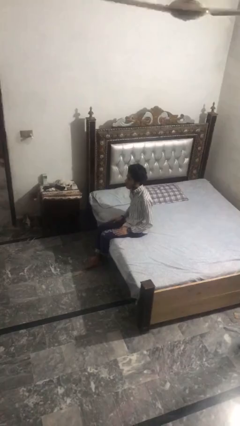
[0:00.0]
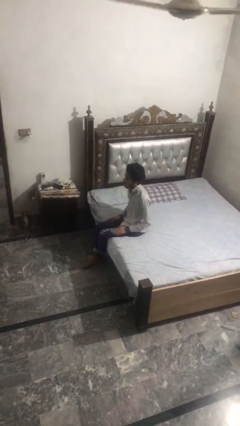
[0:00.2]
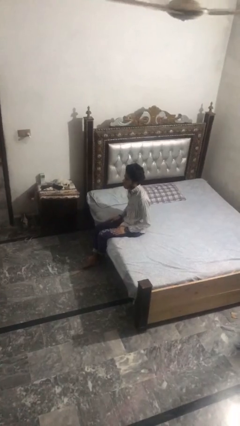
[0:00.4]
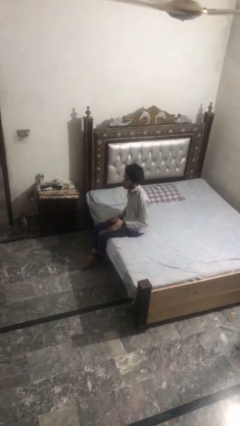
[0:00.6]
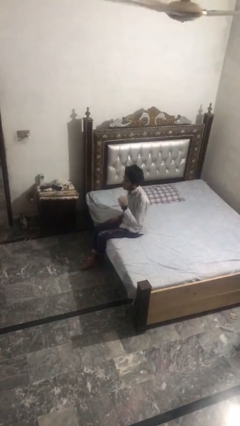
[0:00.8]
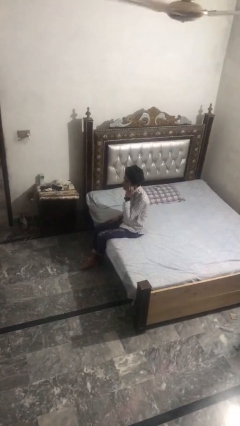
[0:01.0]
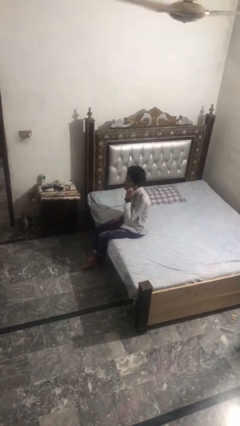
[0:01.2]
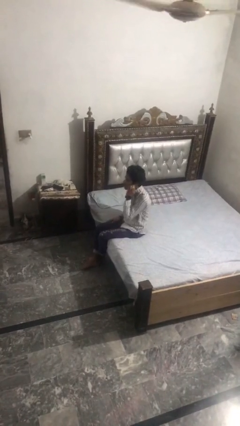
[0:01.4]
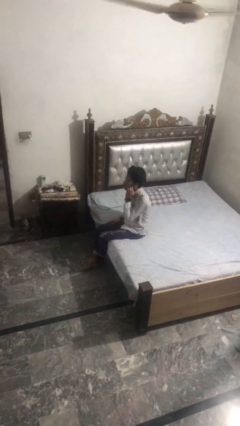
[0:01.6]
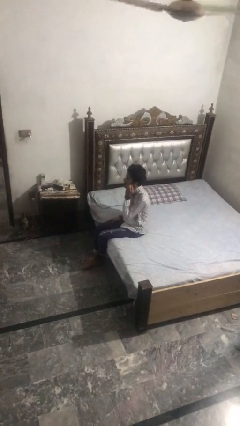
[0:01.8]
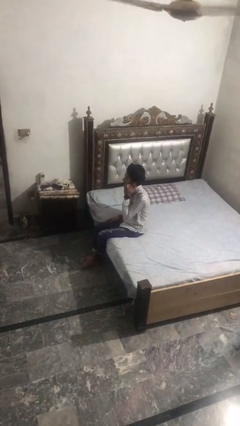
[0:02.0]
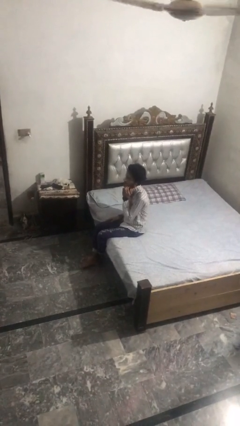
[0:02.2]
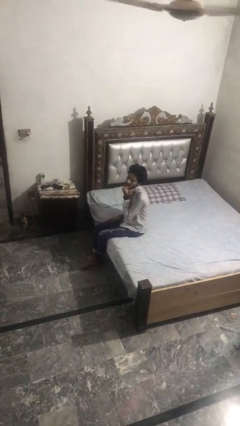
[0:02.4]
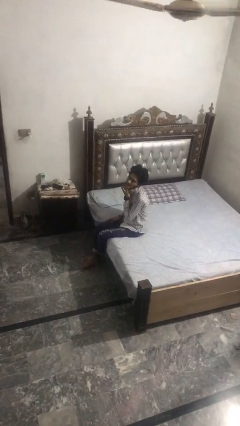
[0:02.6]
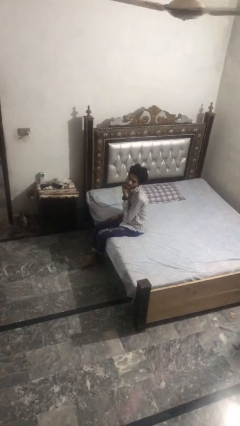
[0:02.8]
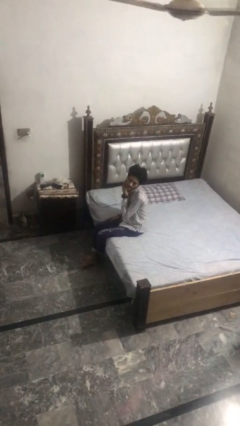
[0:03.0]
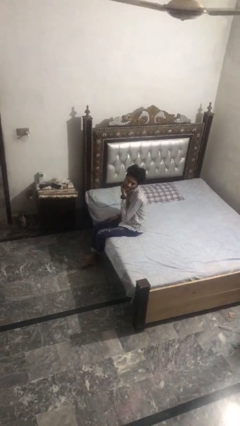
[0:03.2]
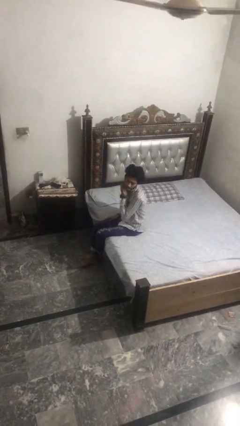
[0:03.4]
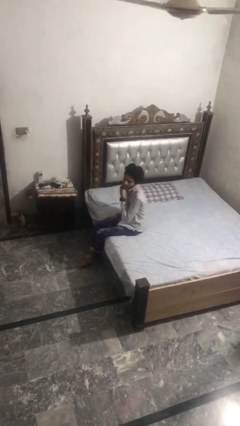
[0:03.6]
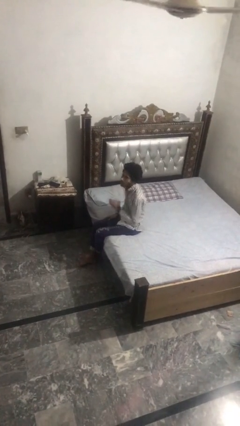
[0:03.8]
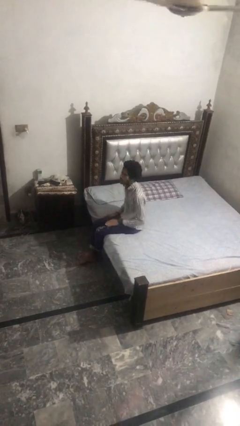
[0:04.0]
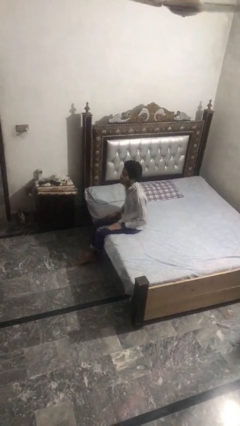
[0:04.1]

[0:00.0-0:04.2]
person scratches face

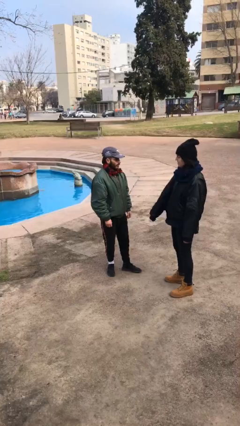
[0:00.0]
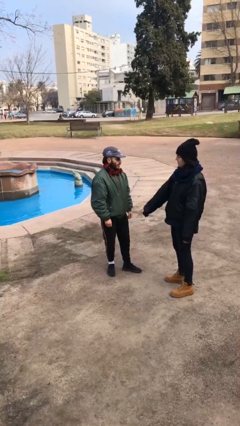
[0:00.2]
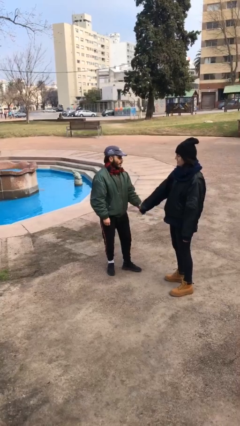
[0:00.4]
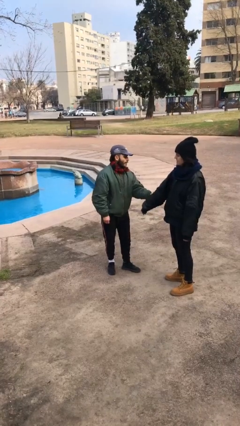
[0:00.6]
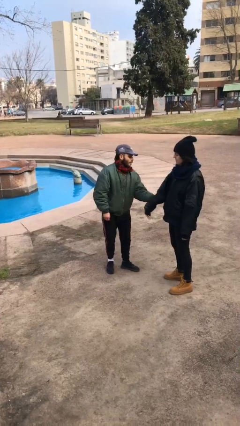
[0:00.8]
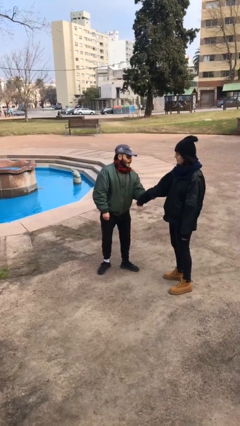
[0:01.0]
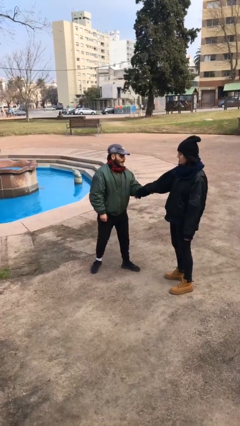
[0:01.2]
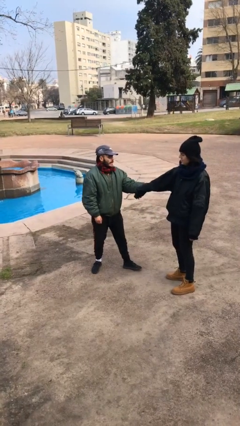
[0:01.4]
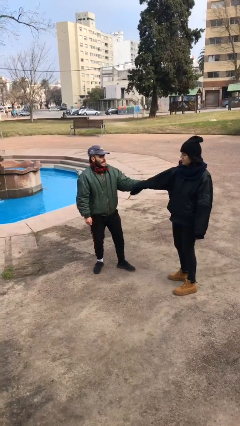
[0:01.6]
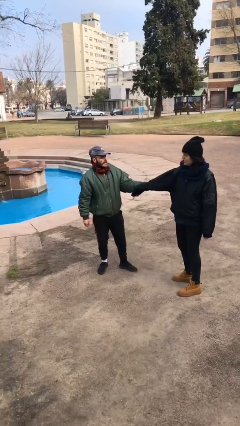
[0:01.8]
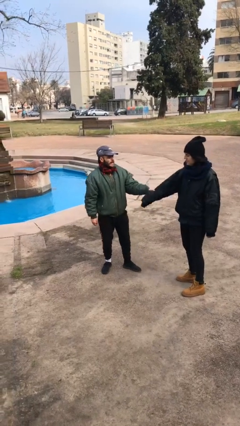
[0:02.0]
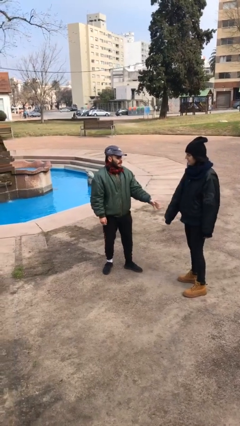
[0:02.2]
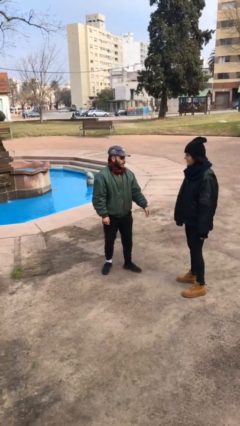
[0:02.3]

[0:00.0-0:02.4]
person grabs person by forearm

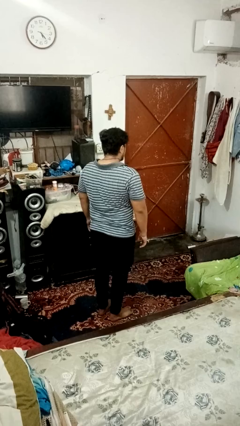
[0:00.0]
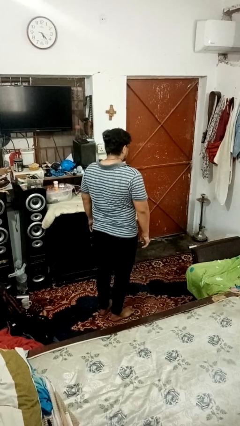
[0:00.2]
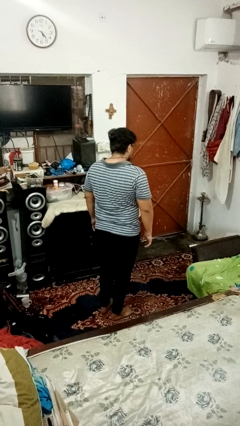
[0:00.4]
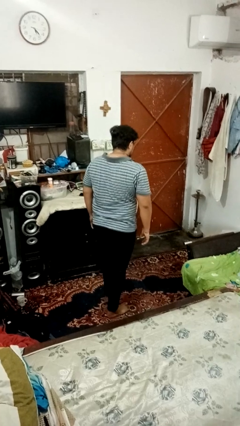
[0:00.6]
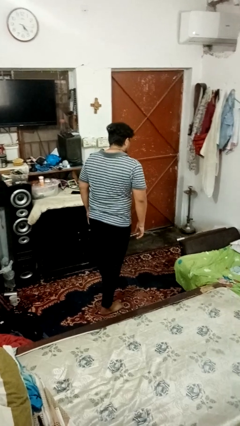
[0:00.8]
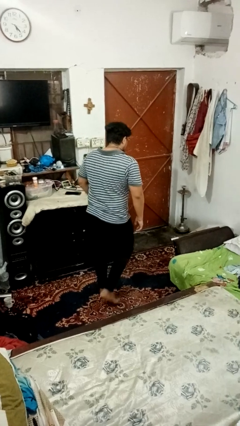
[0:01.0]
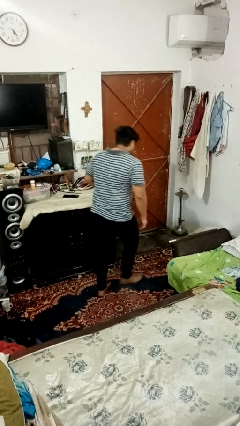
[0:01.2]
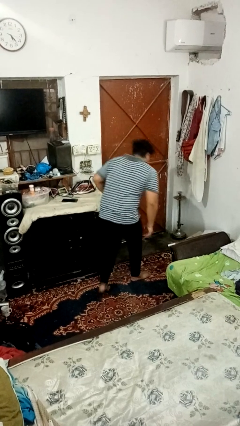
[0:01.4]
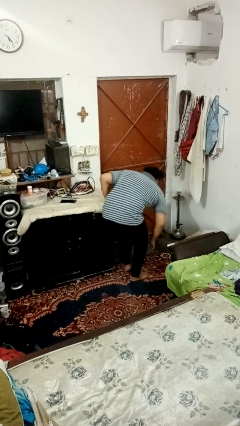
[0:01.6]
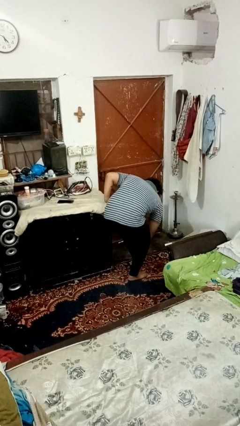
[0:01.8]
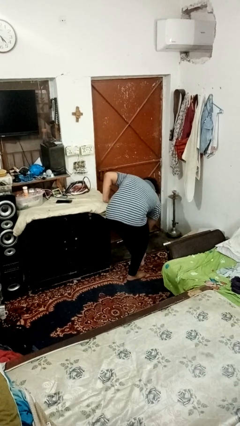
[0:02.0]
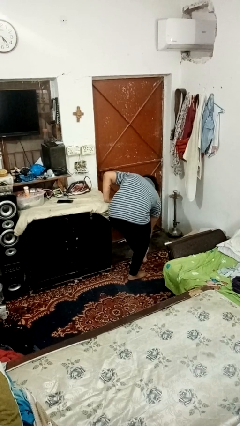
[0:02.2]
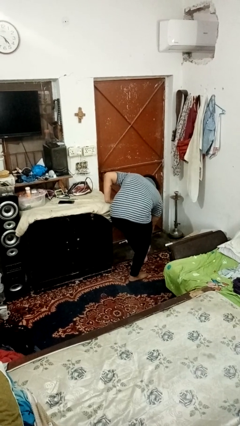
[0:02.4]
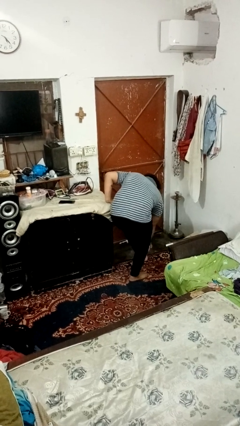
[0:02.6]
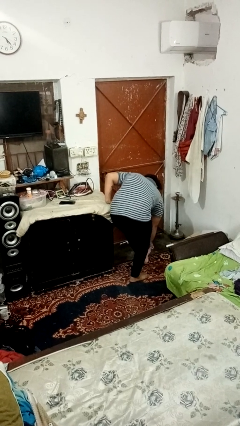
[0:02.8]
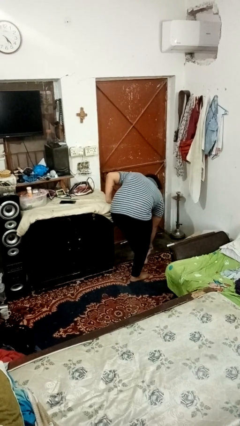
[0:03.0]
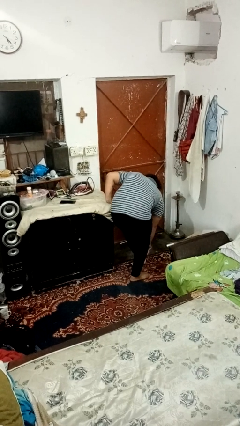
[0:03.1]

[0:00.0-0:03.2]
person stubs toe

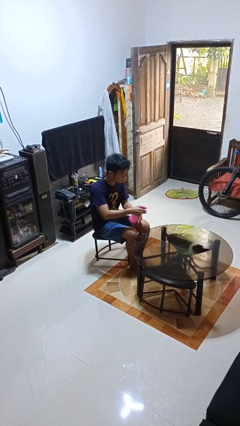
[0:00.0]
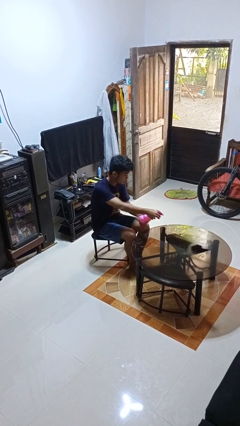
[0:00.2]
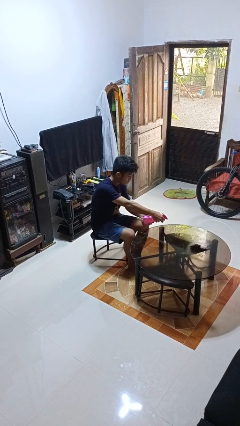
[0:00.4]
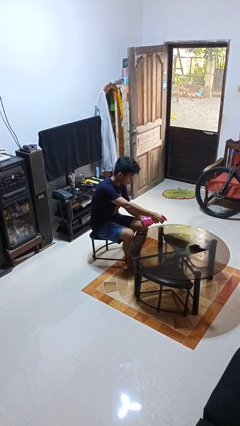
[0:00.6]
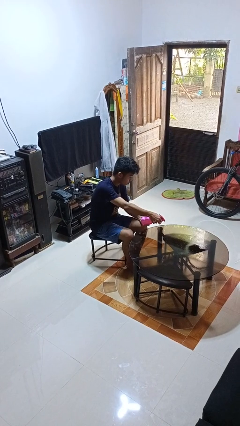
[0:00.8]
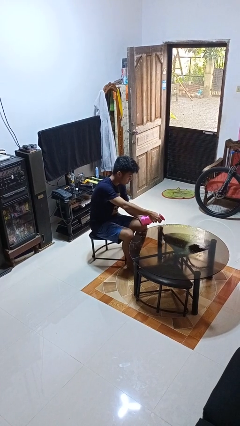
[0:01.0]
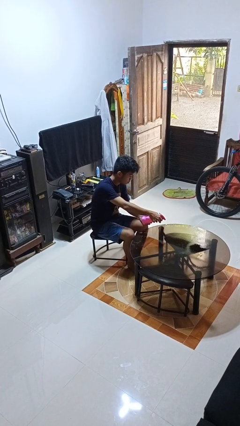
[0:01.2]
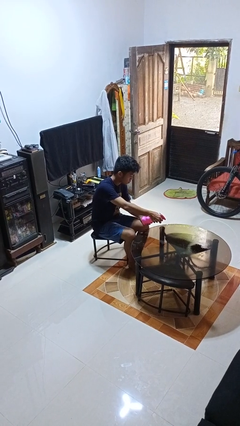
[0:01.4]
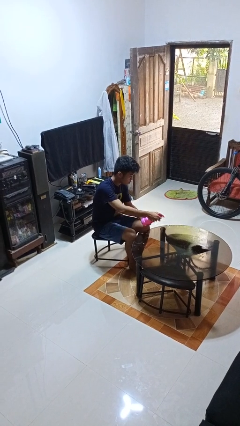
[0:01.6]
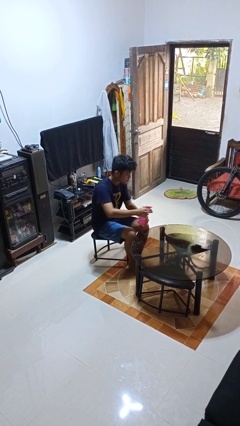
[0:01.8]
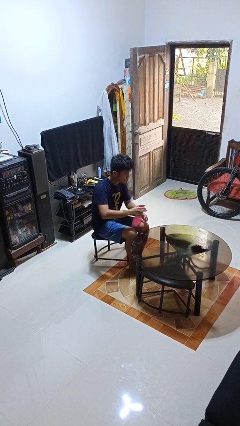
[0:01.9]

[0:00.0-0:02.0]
person sprays from bottle

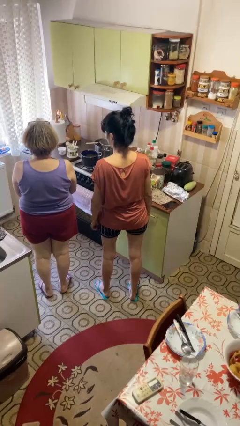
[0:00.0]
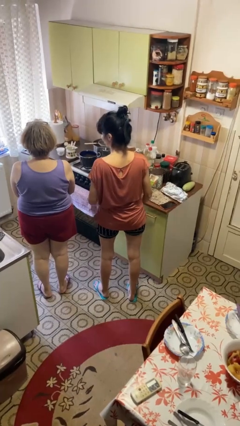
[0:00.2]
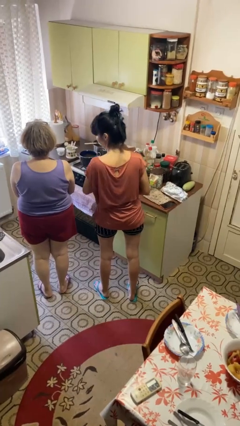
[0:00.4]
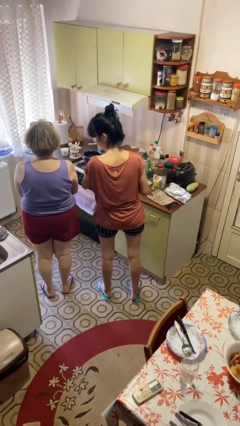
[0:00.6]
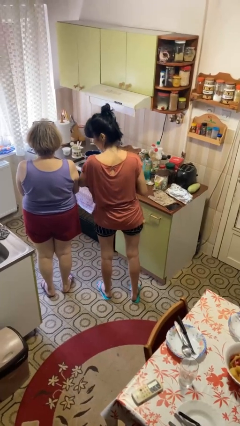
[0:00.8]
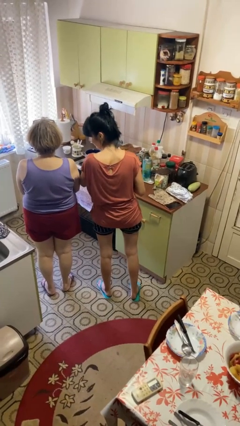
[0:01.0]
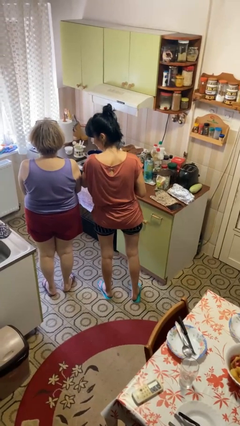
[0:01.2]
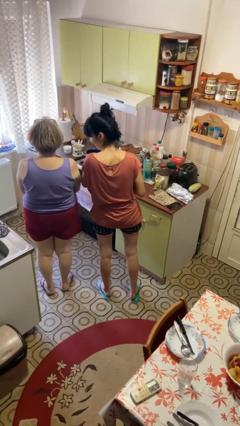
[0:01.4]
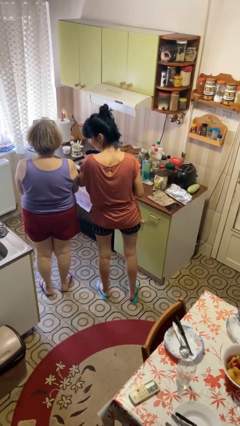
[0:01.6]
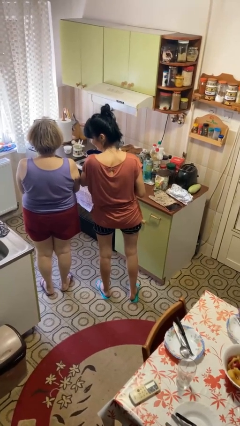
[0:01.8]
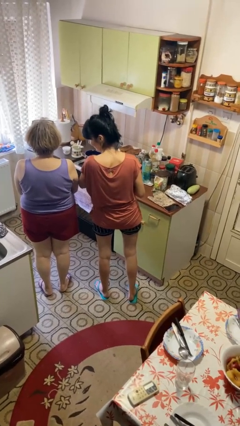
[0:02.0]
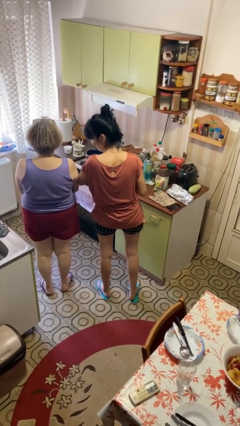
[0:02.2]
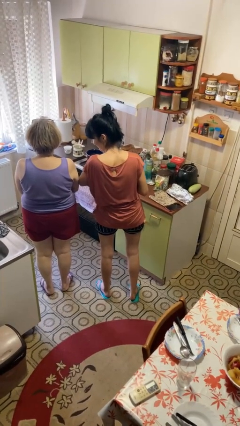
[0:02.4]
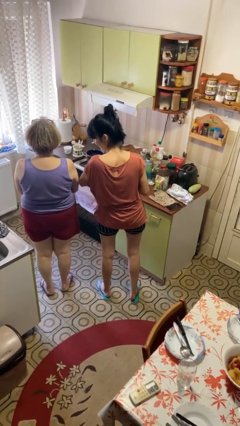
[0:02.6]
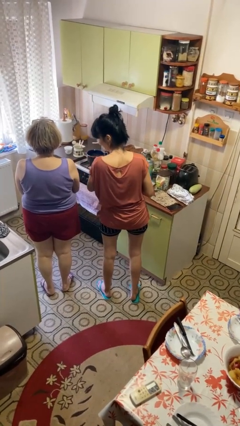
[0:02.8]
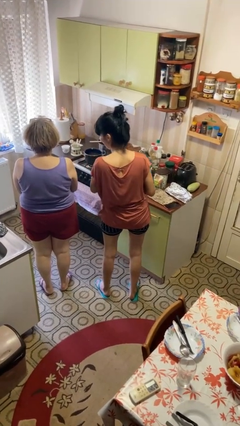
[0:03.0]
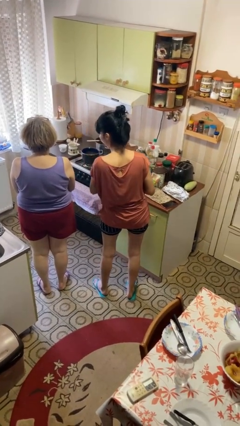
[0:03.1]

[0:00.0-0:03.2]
person nudges person with elbow

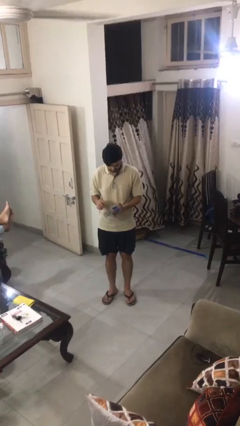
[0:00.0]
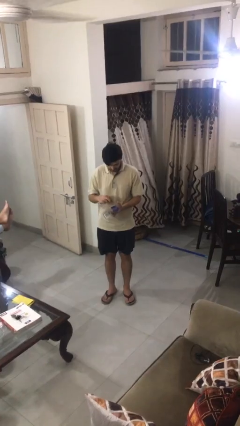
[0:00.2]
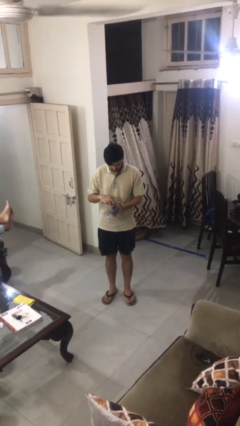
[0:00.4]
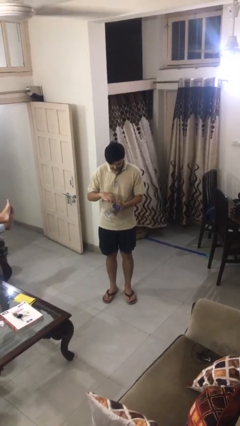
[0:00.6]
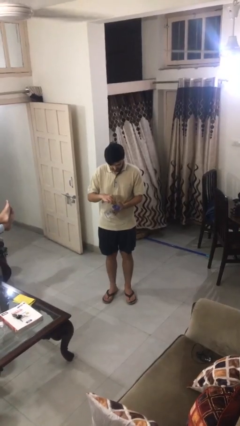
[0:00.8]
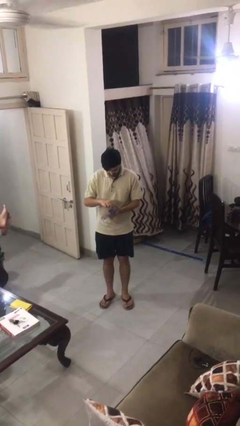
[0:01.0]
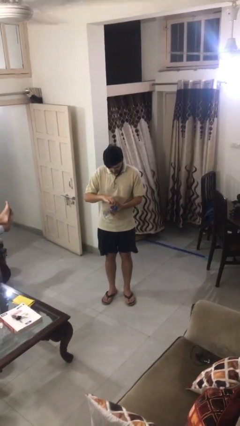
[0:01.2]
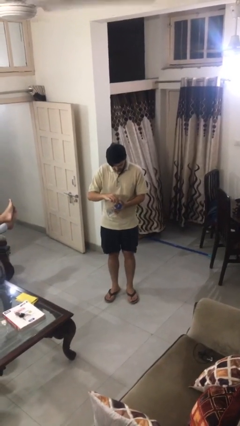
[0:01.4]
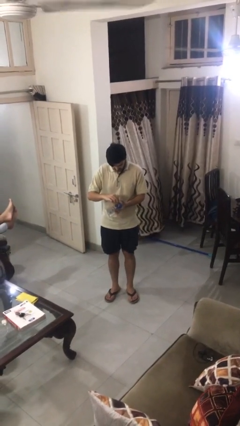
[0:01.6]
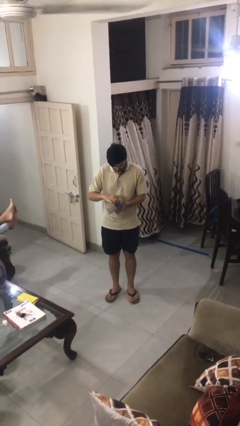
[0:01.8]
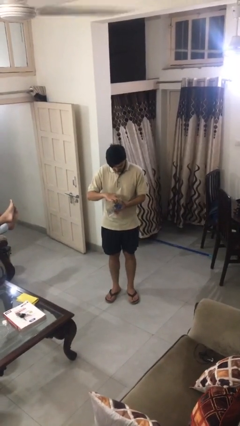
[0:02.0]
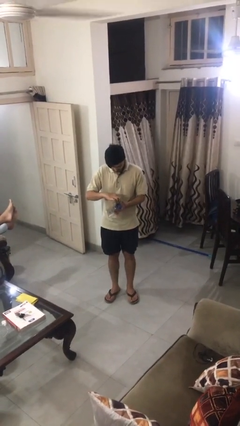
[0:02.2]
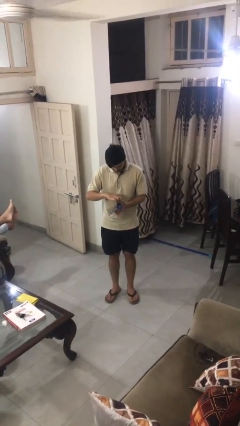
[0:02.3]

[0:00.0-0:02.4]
person searches jewelry box
